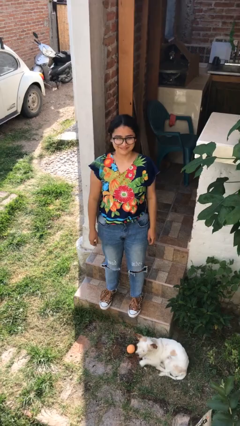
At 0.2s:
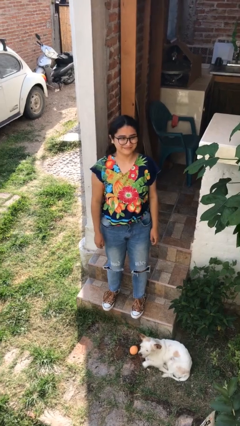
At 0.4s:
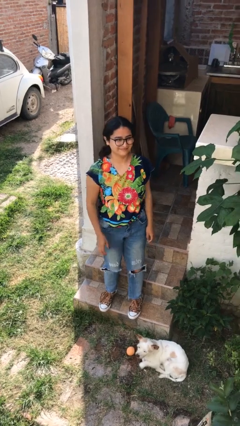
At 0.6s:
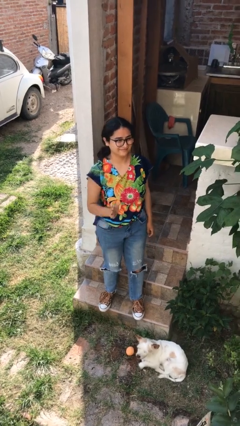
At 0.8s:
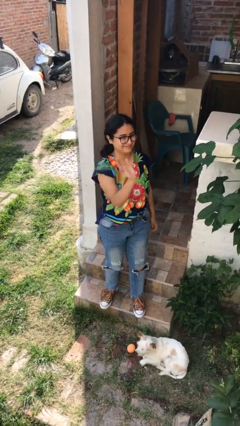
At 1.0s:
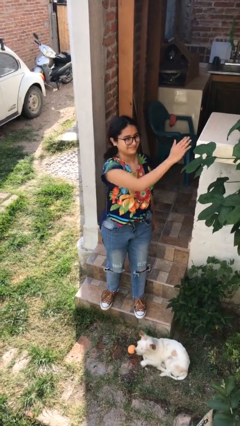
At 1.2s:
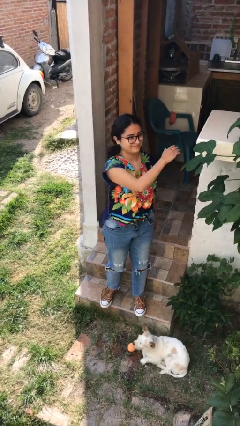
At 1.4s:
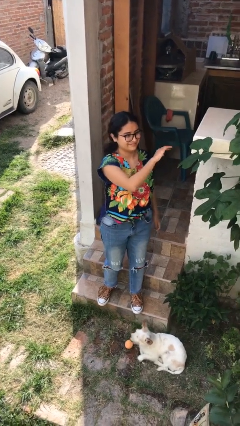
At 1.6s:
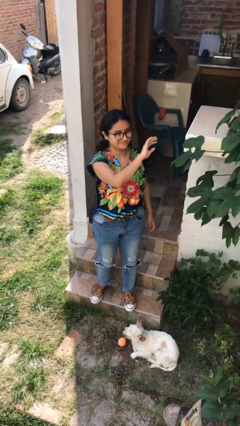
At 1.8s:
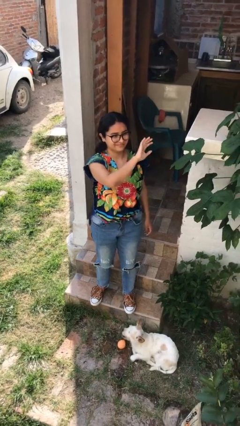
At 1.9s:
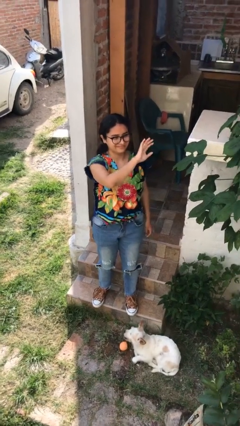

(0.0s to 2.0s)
person gestures swipe left

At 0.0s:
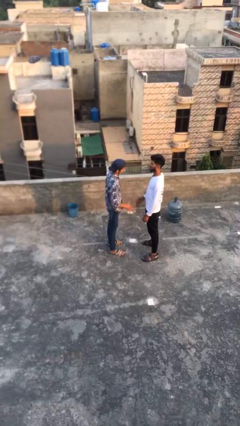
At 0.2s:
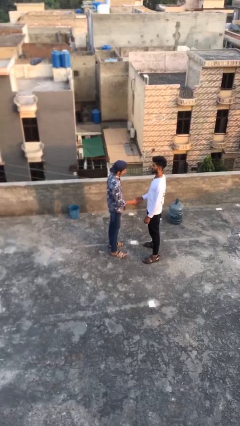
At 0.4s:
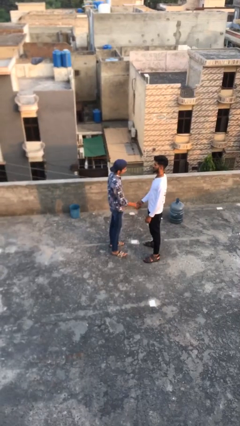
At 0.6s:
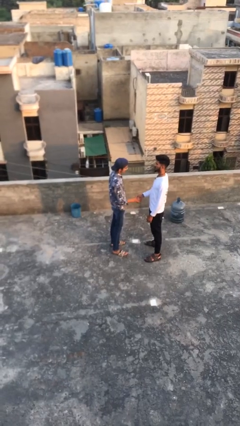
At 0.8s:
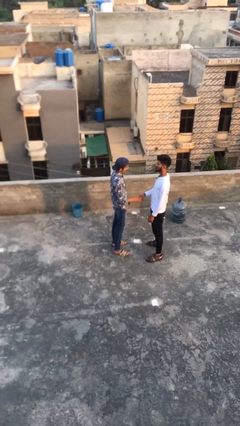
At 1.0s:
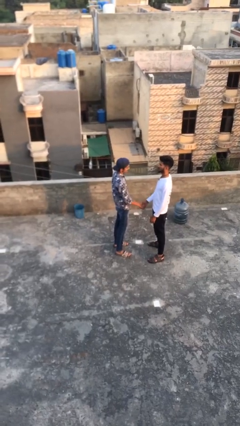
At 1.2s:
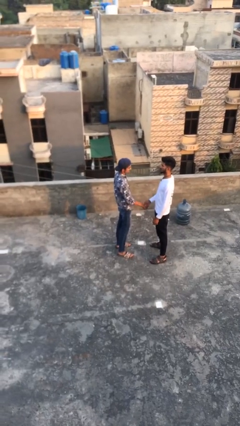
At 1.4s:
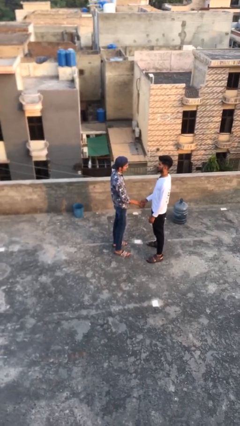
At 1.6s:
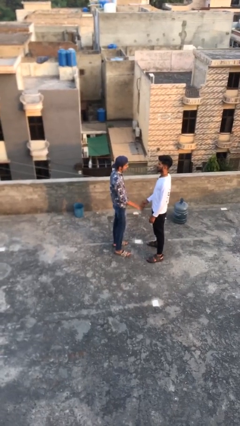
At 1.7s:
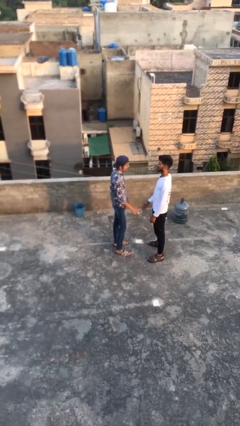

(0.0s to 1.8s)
person shakes hand

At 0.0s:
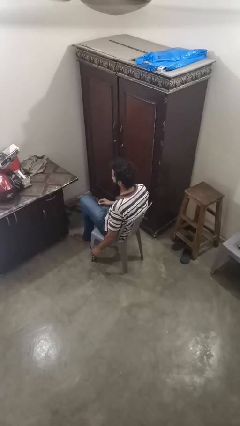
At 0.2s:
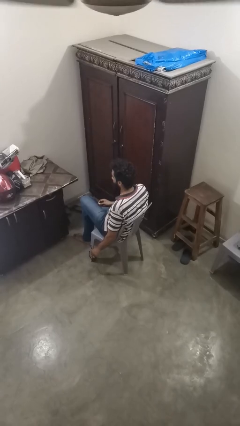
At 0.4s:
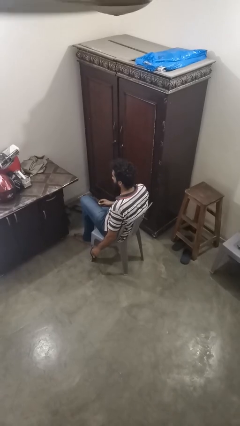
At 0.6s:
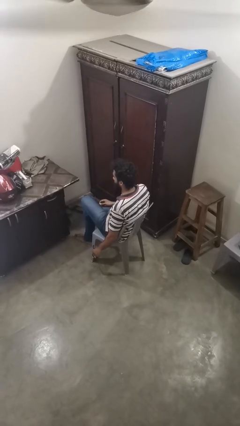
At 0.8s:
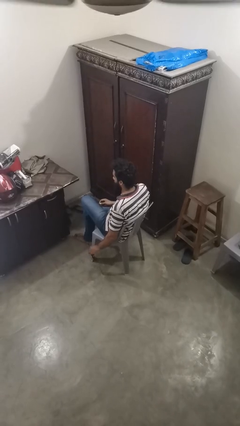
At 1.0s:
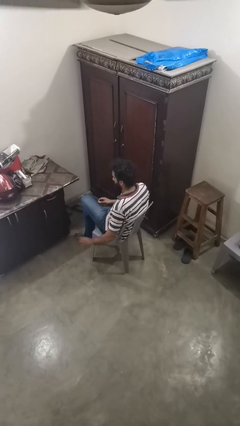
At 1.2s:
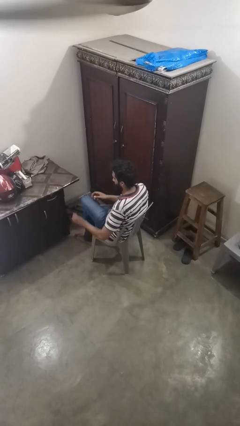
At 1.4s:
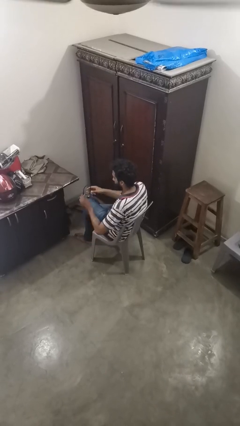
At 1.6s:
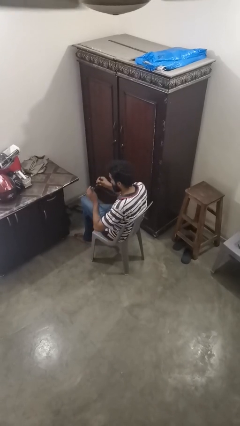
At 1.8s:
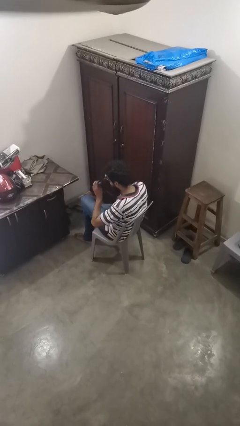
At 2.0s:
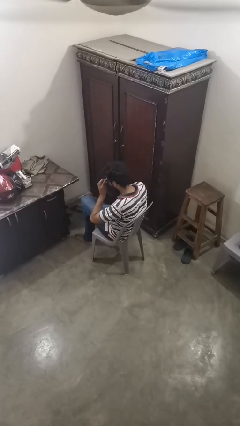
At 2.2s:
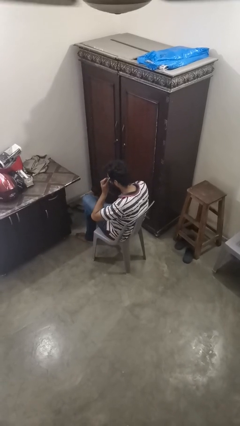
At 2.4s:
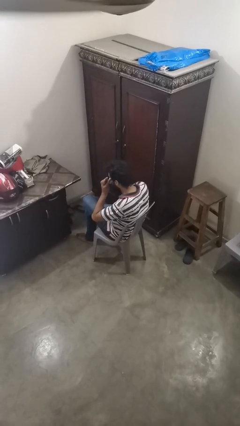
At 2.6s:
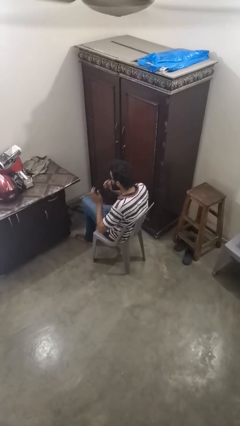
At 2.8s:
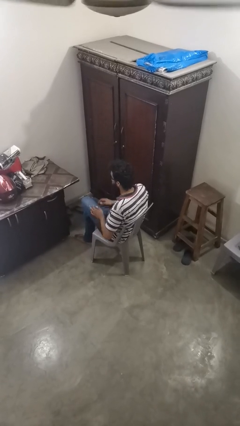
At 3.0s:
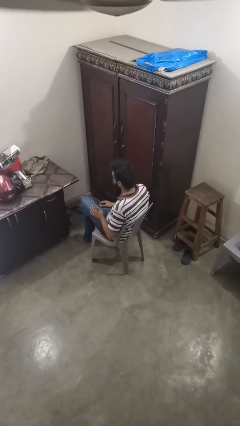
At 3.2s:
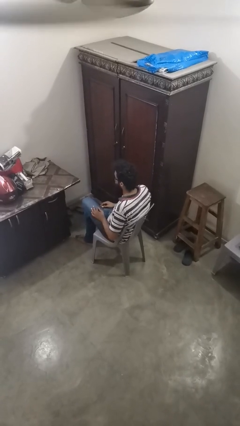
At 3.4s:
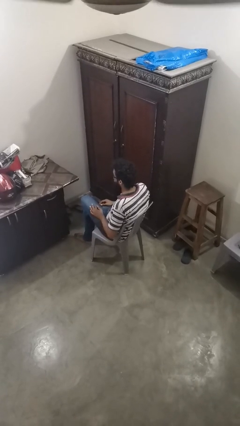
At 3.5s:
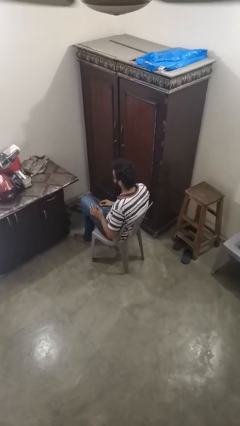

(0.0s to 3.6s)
person puts on sunglasses

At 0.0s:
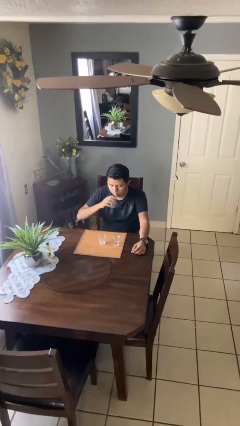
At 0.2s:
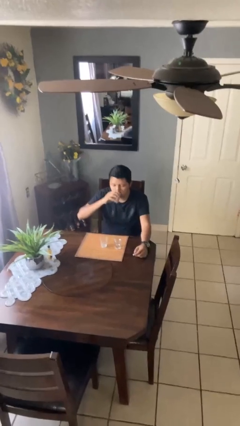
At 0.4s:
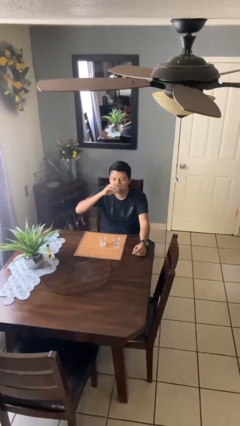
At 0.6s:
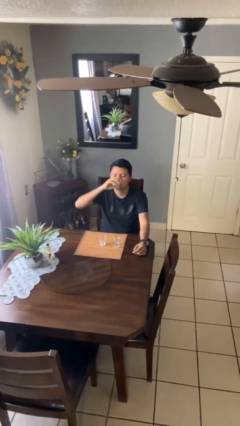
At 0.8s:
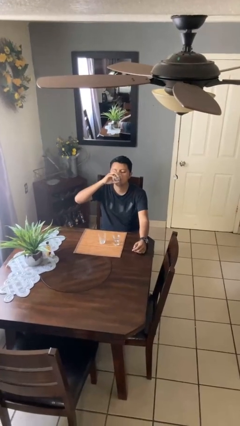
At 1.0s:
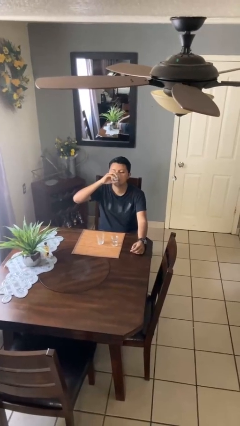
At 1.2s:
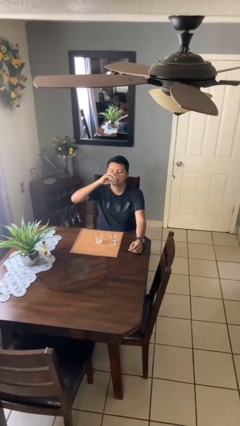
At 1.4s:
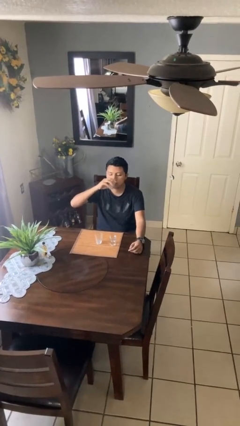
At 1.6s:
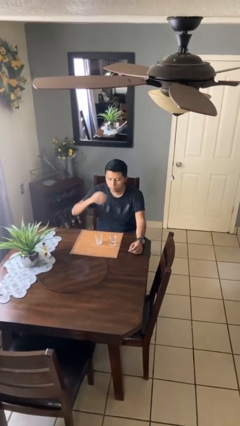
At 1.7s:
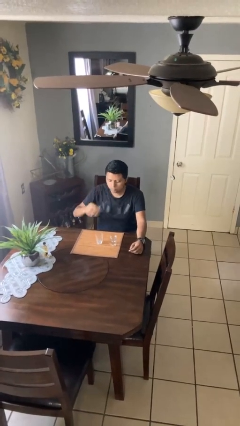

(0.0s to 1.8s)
person drinks from shotglass

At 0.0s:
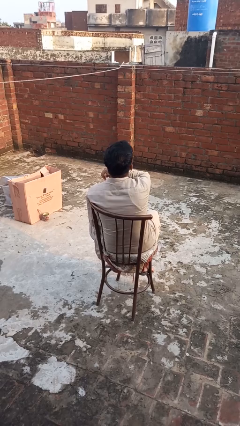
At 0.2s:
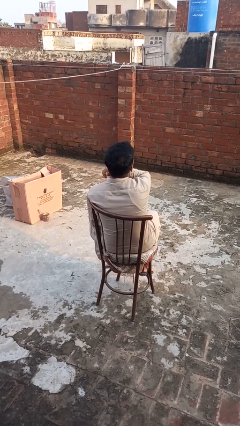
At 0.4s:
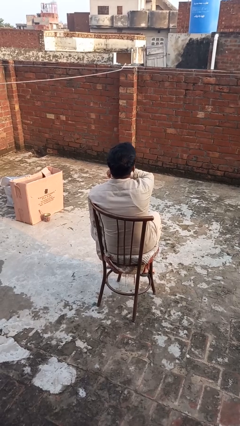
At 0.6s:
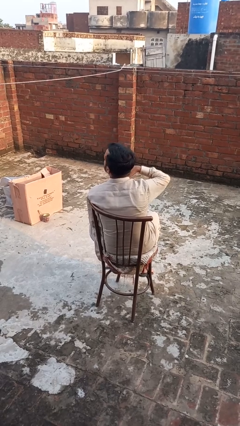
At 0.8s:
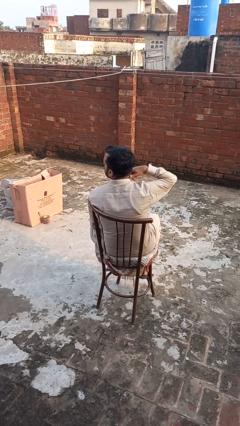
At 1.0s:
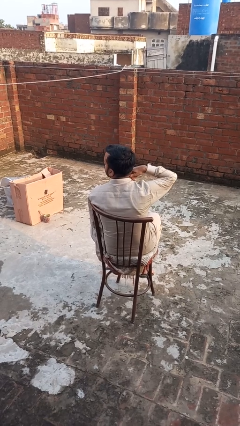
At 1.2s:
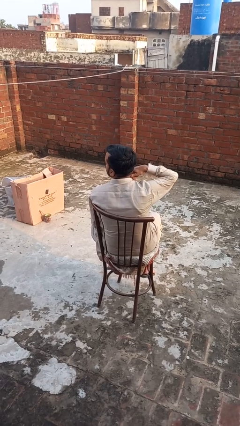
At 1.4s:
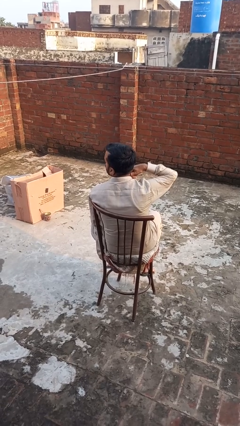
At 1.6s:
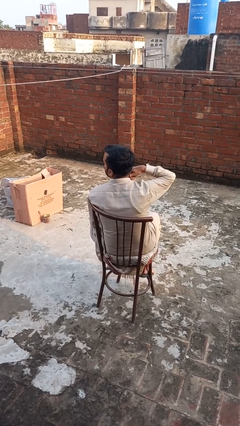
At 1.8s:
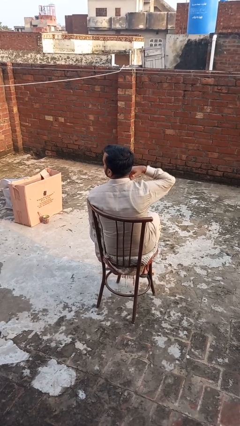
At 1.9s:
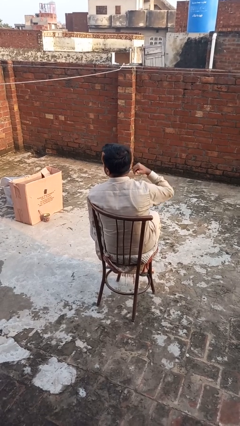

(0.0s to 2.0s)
person gestures cut

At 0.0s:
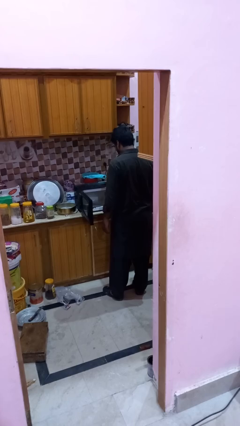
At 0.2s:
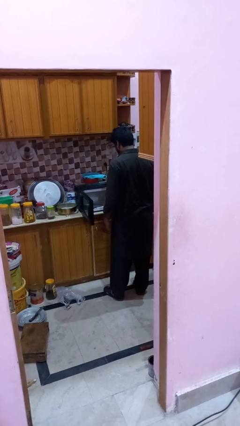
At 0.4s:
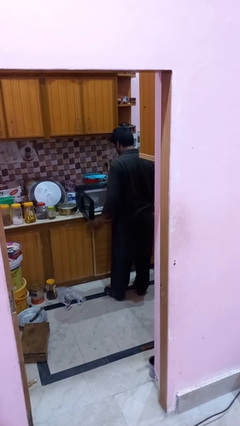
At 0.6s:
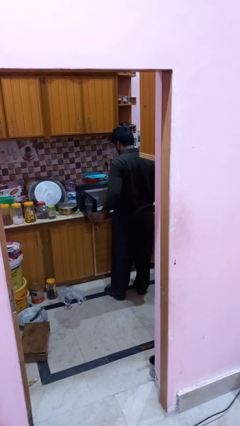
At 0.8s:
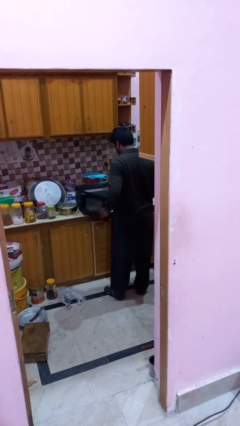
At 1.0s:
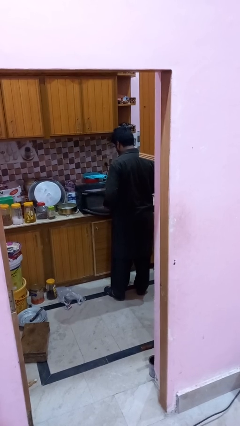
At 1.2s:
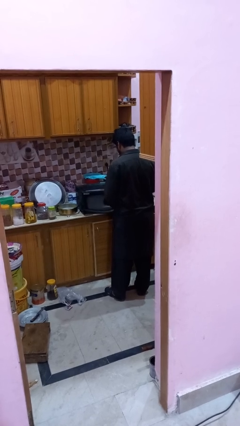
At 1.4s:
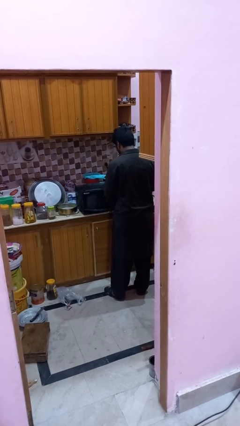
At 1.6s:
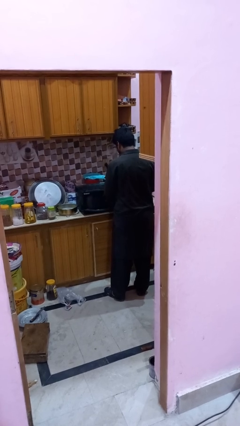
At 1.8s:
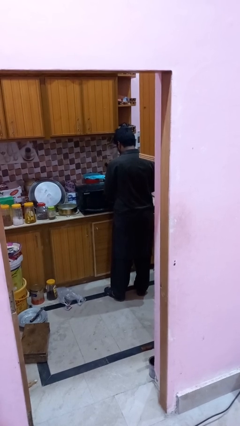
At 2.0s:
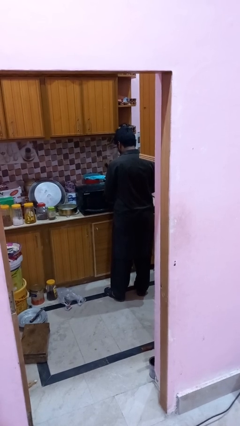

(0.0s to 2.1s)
person closes oven door

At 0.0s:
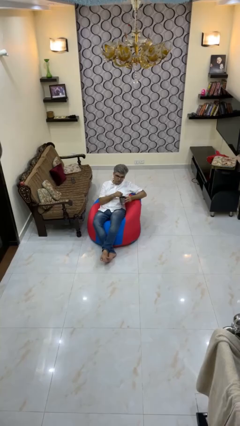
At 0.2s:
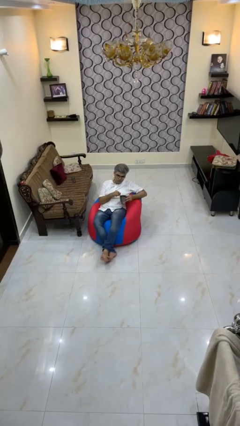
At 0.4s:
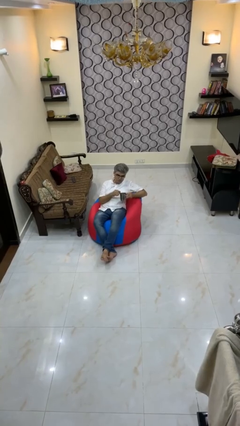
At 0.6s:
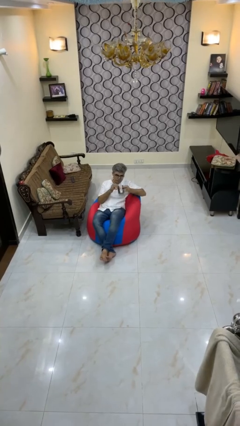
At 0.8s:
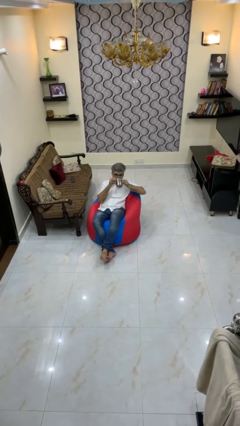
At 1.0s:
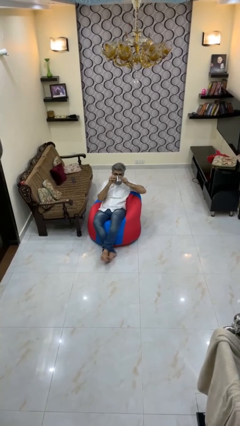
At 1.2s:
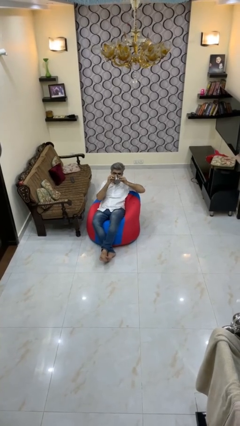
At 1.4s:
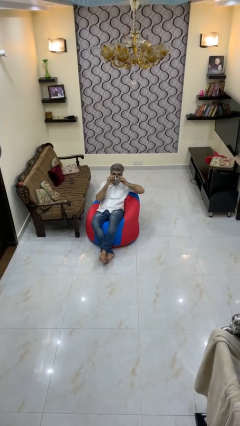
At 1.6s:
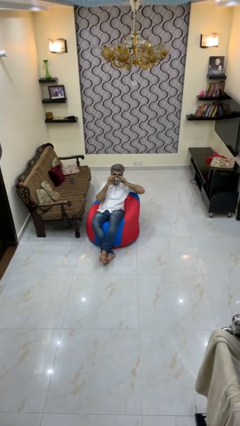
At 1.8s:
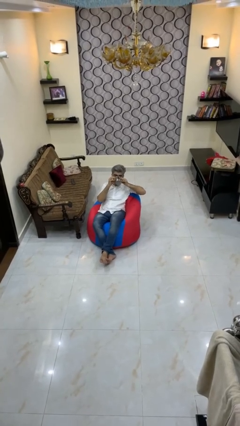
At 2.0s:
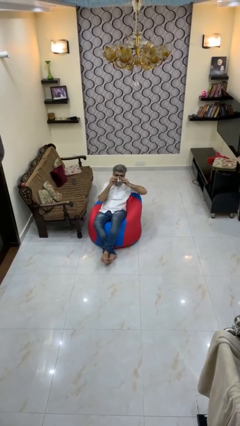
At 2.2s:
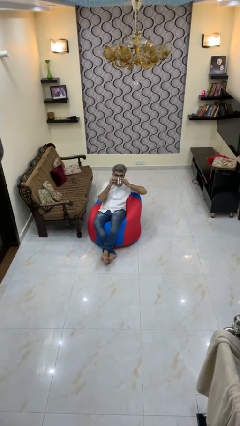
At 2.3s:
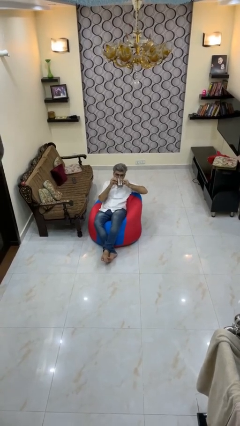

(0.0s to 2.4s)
person drinks from mug

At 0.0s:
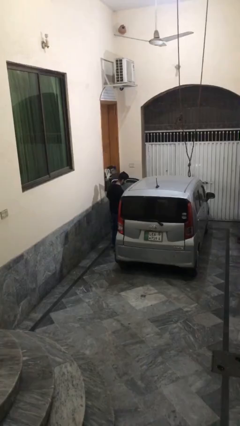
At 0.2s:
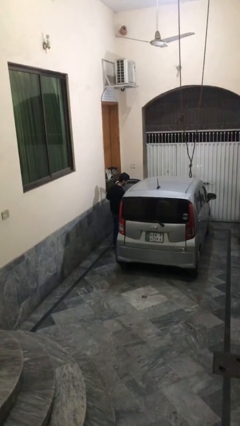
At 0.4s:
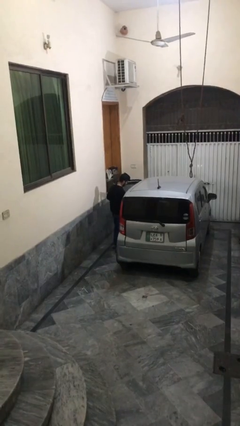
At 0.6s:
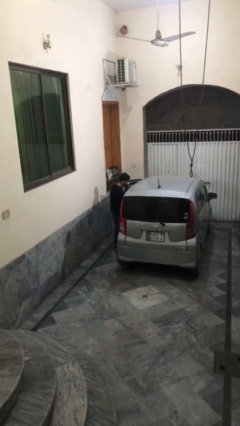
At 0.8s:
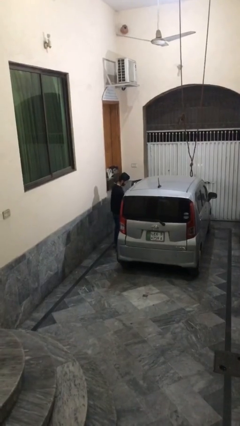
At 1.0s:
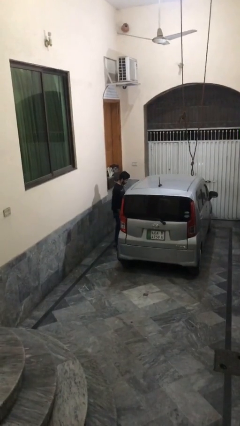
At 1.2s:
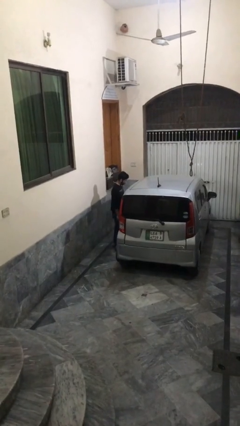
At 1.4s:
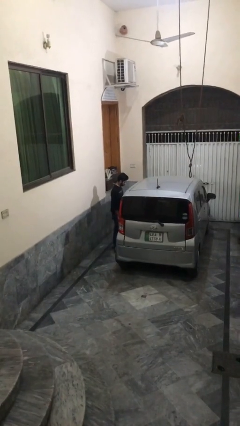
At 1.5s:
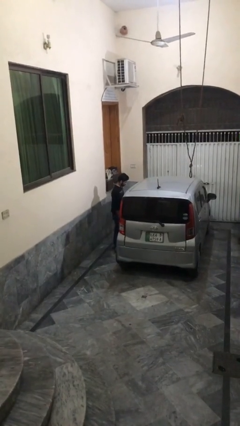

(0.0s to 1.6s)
person closes car door
